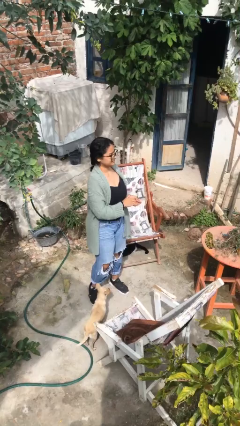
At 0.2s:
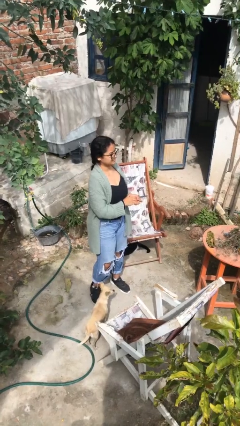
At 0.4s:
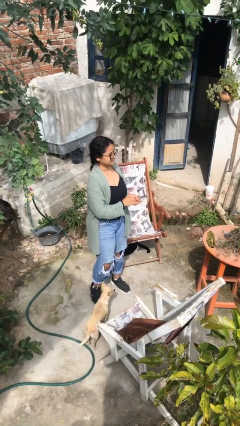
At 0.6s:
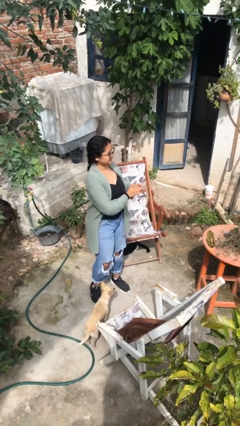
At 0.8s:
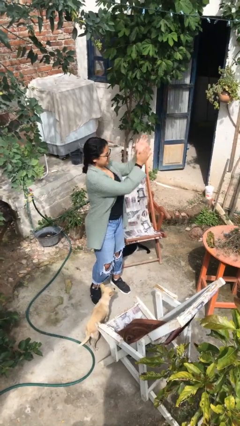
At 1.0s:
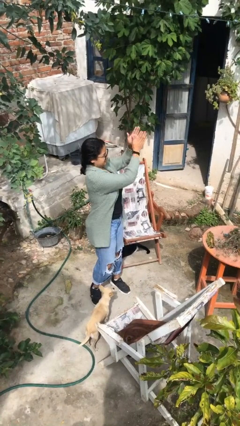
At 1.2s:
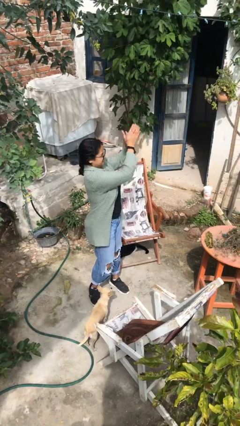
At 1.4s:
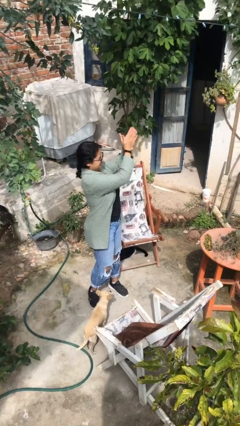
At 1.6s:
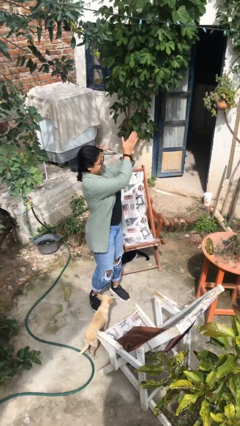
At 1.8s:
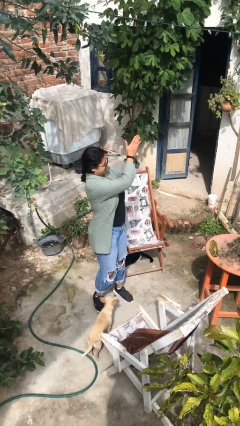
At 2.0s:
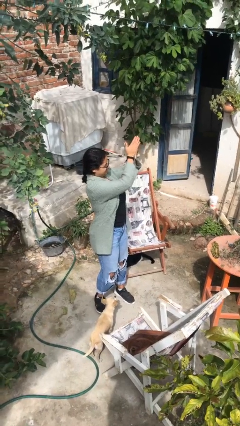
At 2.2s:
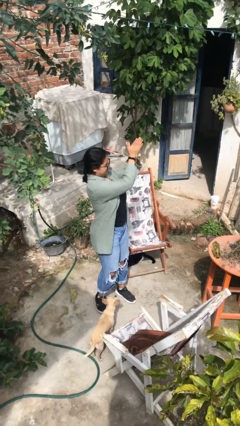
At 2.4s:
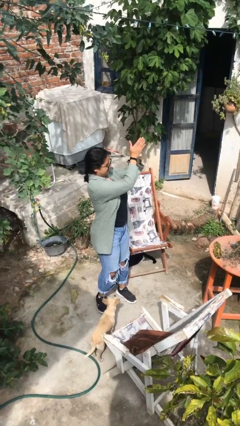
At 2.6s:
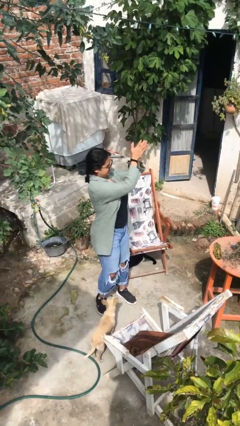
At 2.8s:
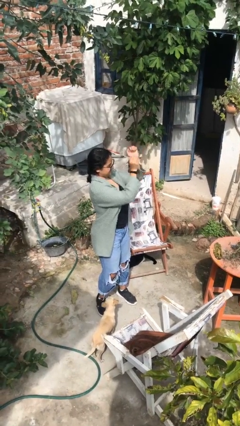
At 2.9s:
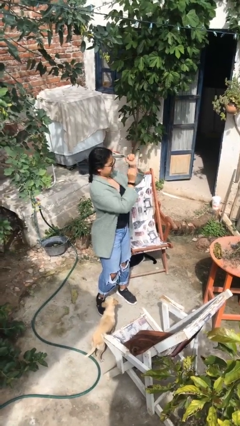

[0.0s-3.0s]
person claps hands

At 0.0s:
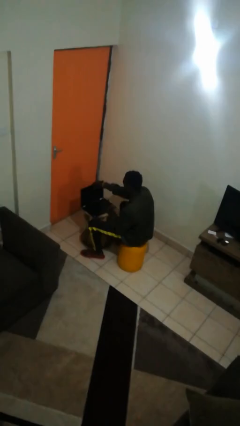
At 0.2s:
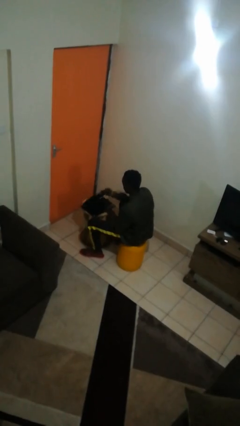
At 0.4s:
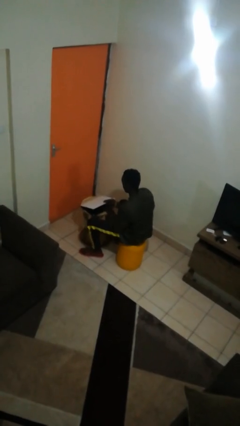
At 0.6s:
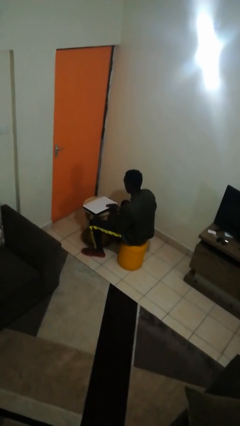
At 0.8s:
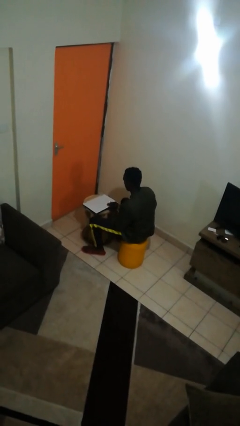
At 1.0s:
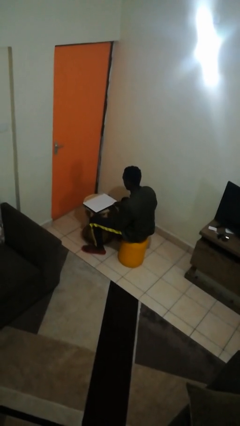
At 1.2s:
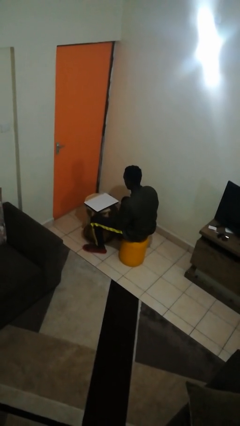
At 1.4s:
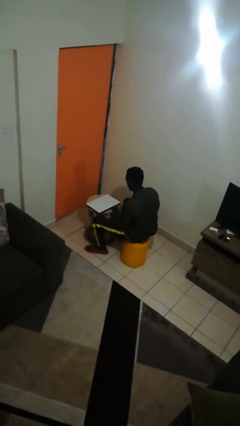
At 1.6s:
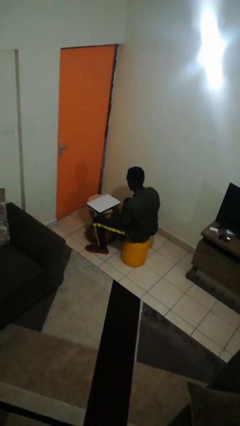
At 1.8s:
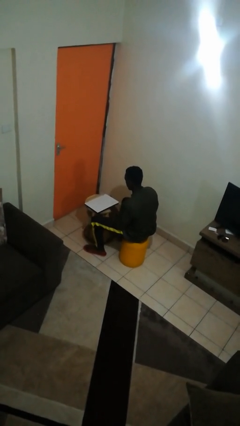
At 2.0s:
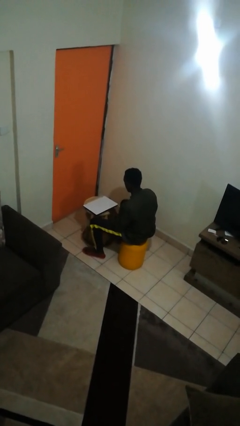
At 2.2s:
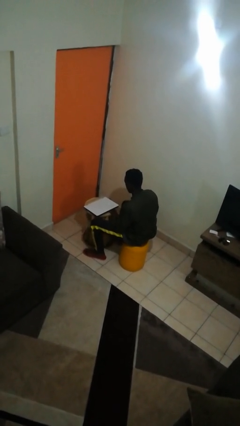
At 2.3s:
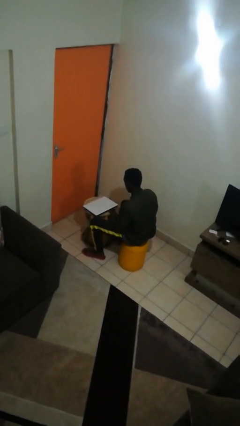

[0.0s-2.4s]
person closes laptop

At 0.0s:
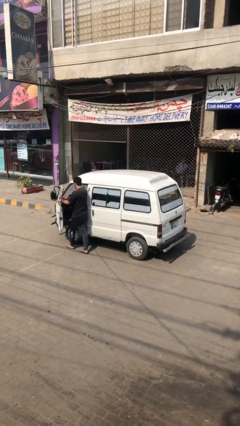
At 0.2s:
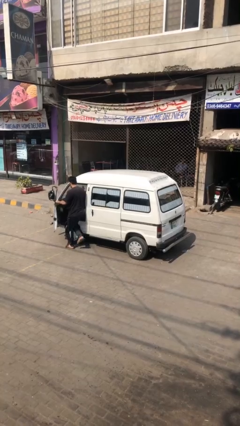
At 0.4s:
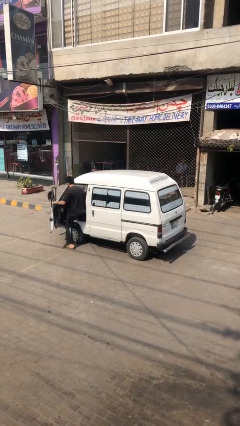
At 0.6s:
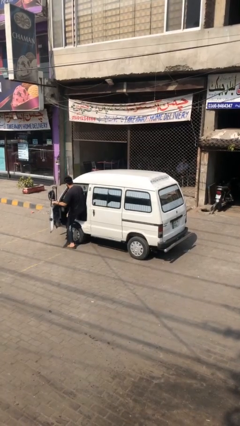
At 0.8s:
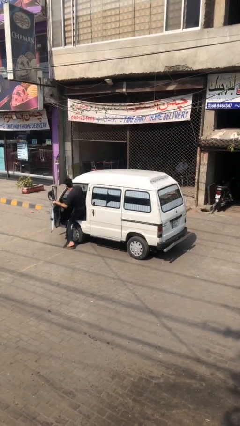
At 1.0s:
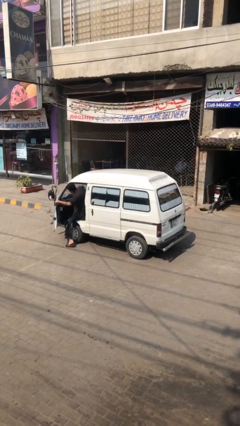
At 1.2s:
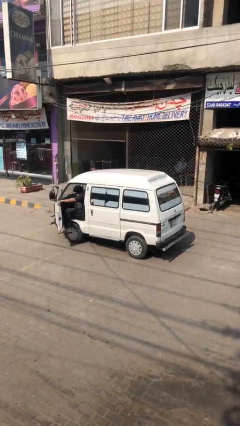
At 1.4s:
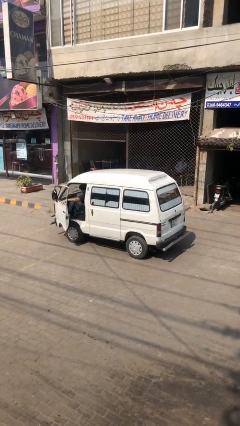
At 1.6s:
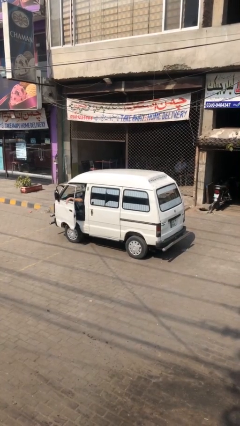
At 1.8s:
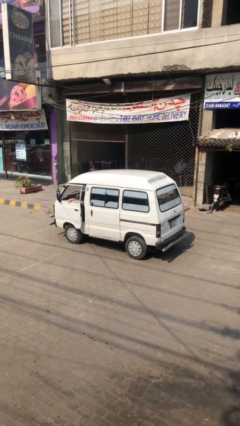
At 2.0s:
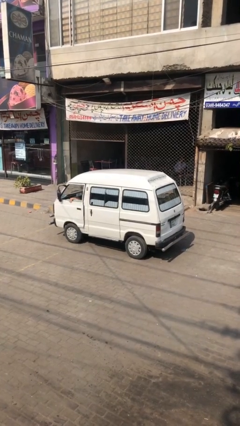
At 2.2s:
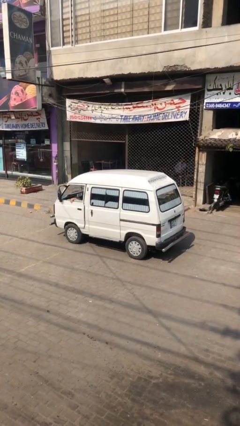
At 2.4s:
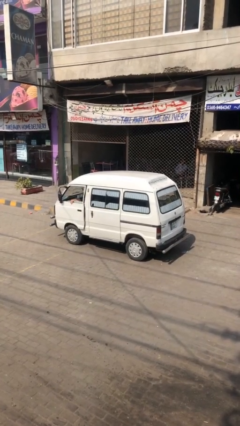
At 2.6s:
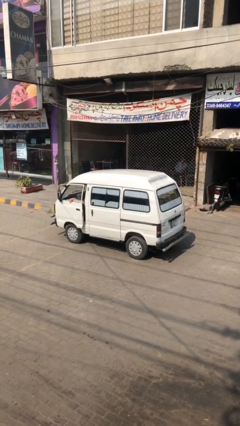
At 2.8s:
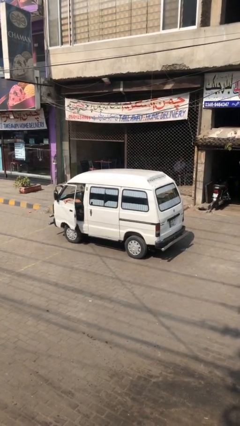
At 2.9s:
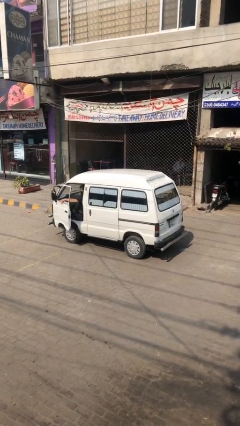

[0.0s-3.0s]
car picks up person

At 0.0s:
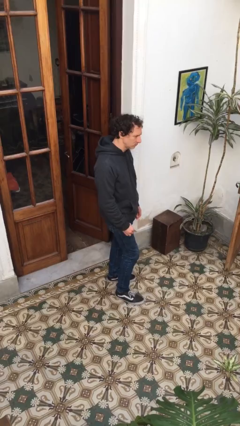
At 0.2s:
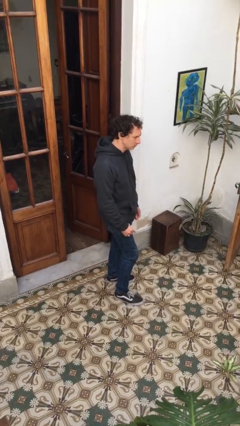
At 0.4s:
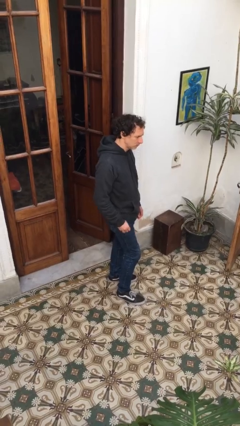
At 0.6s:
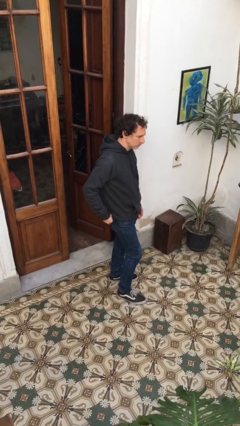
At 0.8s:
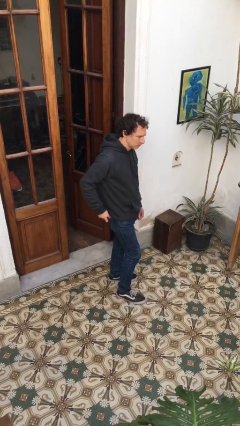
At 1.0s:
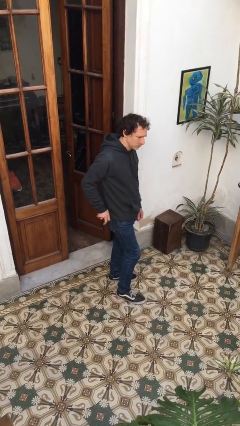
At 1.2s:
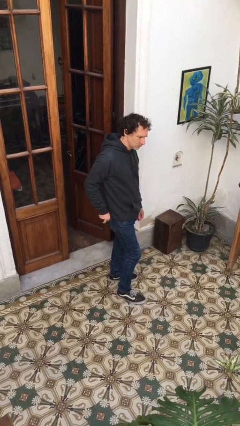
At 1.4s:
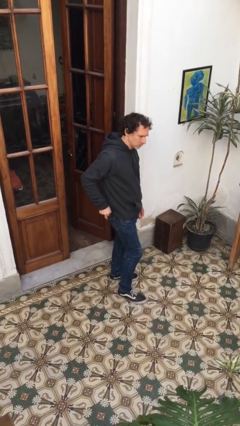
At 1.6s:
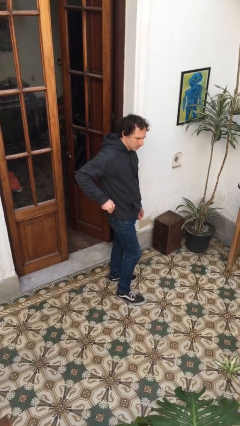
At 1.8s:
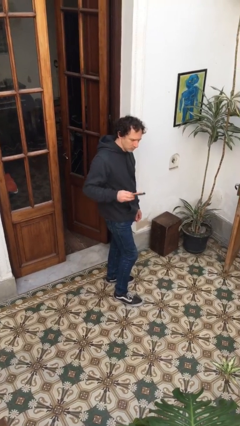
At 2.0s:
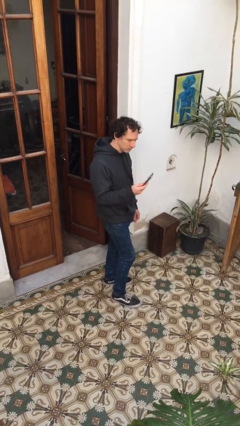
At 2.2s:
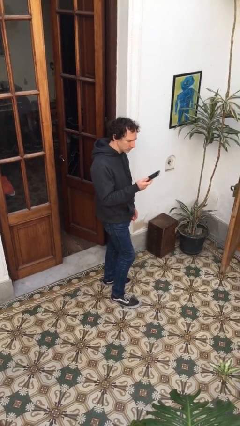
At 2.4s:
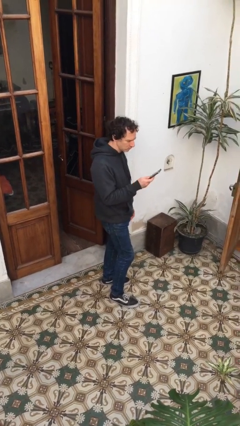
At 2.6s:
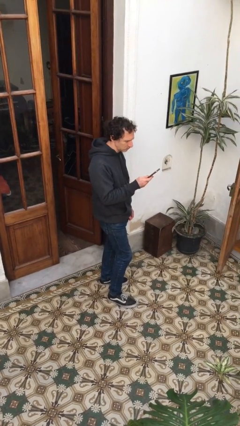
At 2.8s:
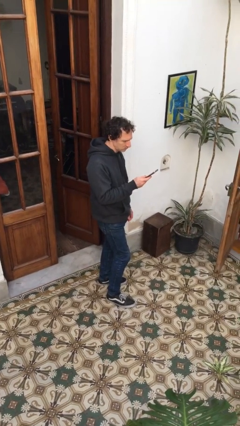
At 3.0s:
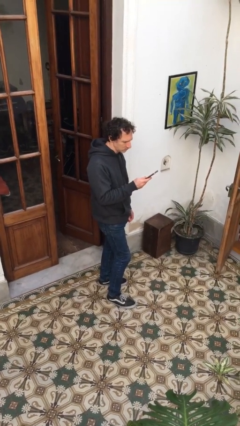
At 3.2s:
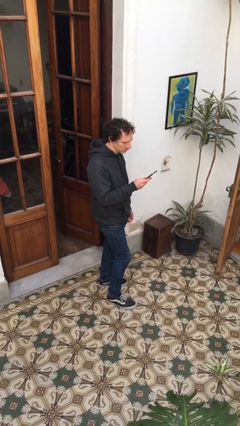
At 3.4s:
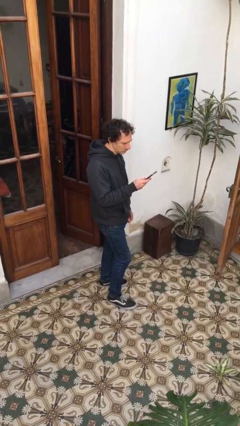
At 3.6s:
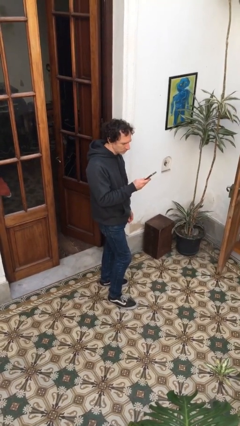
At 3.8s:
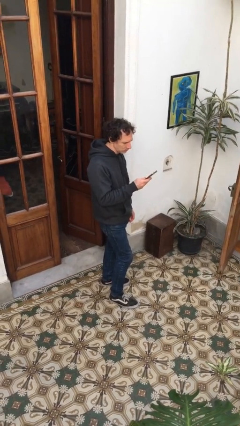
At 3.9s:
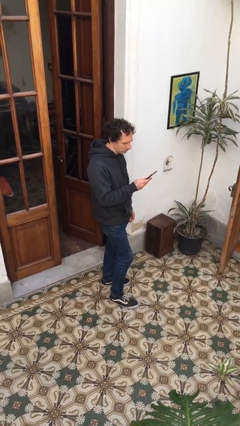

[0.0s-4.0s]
person takes phone from pocket

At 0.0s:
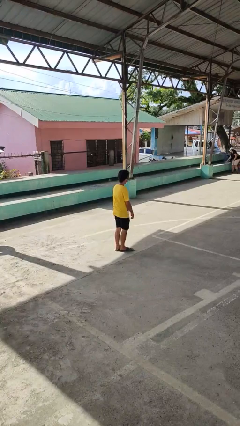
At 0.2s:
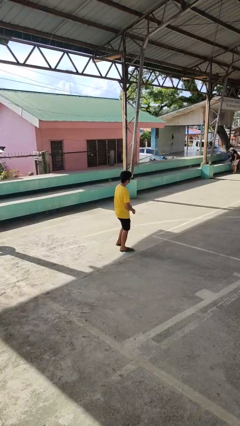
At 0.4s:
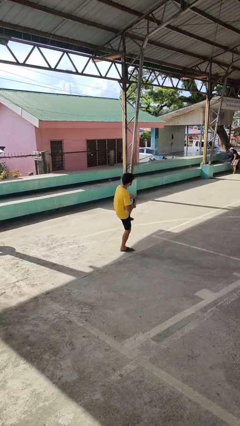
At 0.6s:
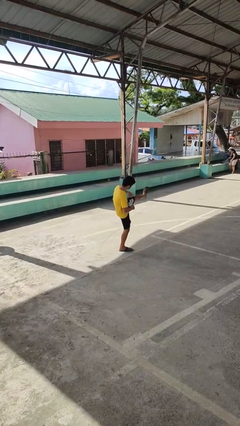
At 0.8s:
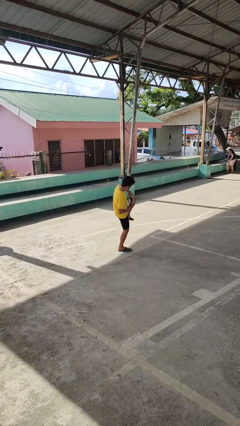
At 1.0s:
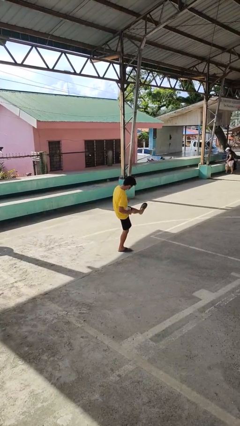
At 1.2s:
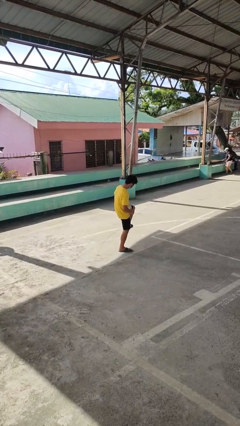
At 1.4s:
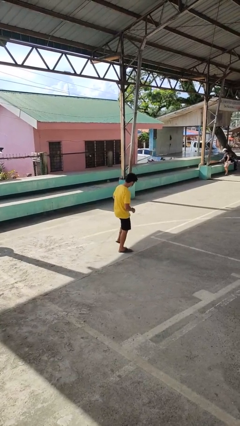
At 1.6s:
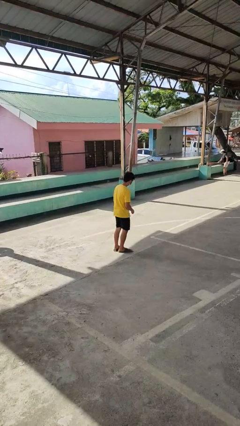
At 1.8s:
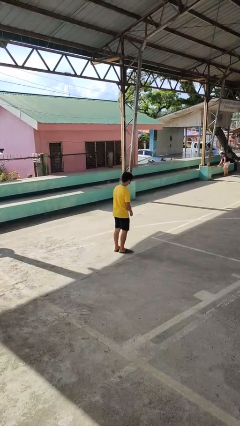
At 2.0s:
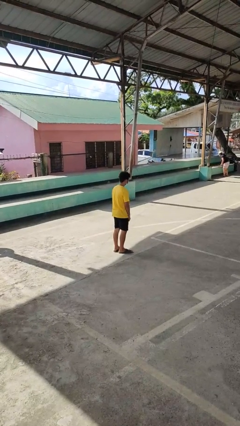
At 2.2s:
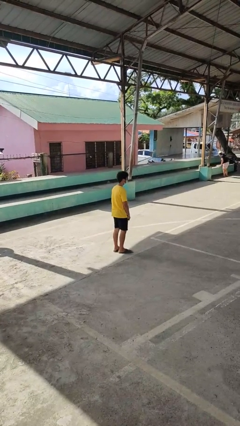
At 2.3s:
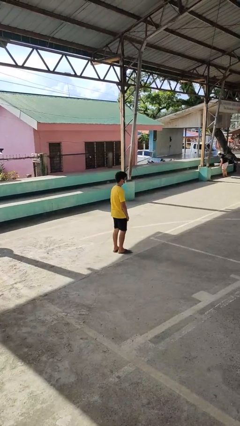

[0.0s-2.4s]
person karate kicks

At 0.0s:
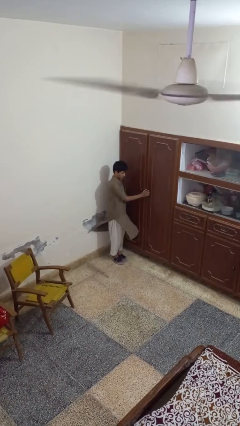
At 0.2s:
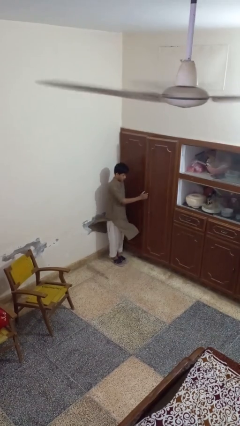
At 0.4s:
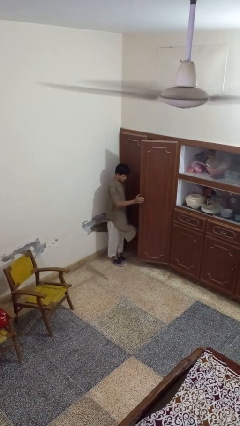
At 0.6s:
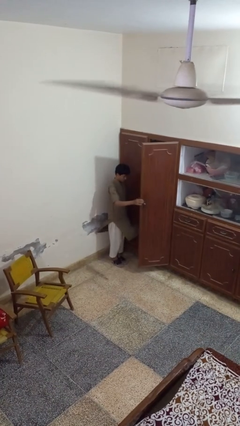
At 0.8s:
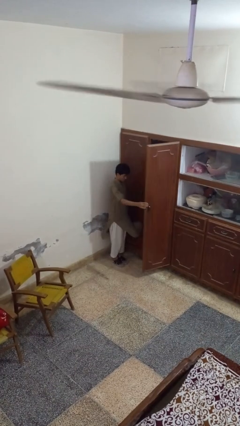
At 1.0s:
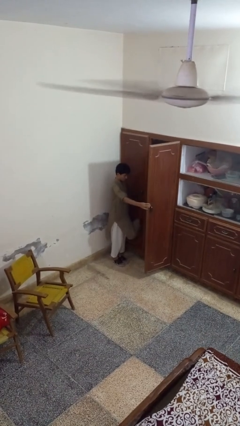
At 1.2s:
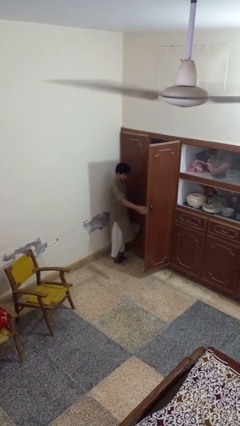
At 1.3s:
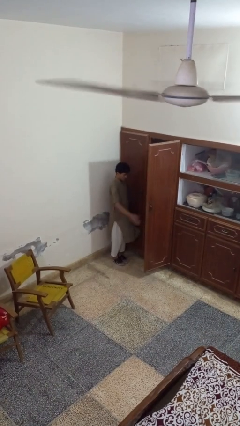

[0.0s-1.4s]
person opens closet door

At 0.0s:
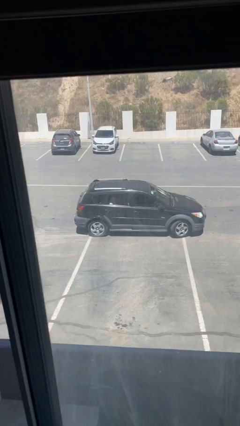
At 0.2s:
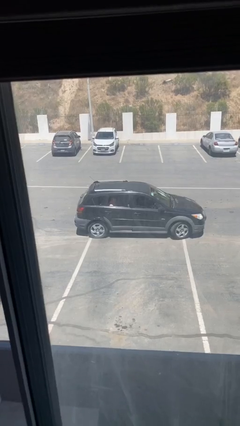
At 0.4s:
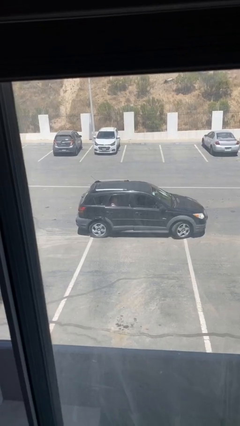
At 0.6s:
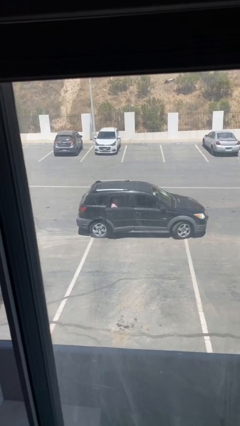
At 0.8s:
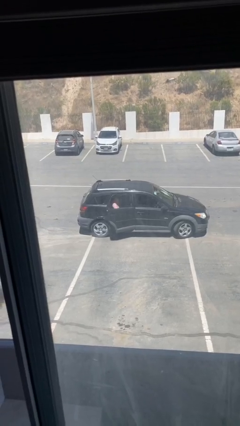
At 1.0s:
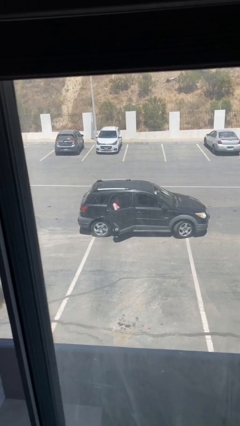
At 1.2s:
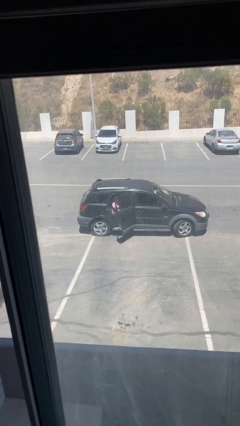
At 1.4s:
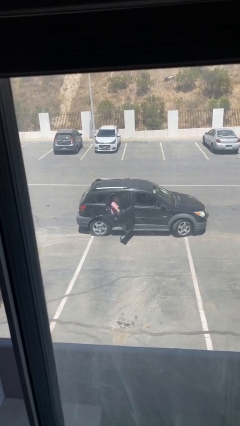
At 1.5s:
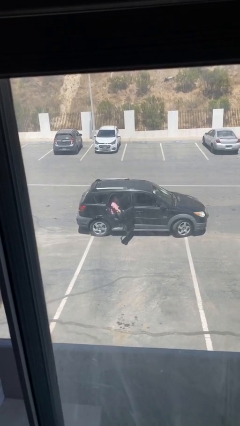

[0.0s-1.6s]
person opens car door
